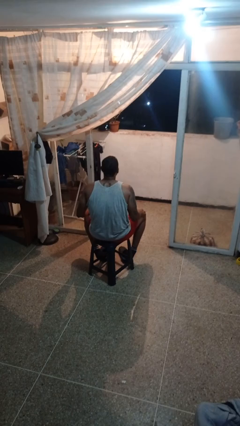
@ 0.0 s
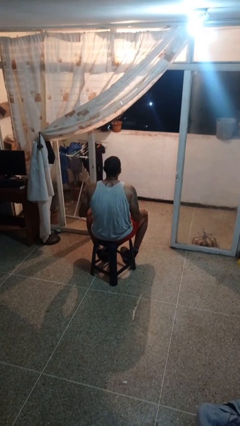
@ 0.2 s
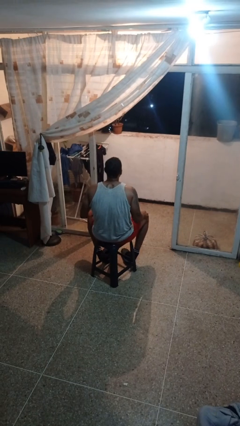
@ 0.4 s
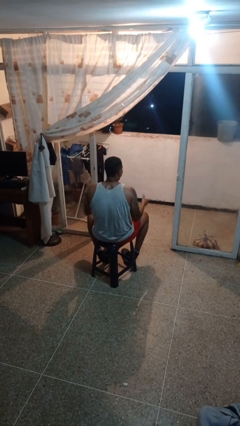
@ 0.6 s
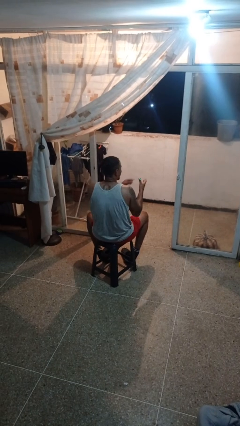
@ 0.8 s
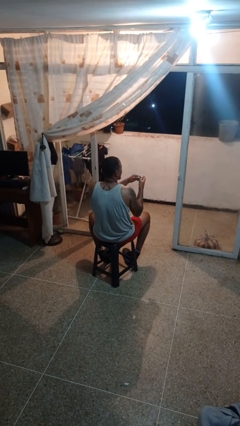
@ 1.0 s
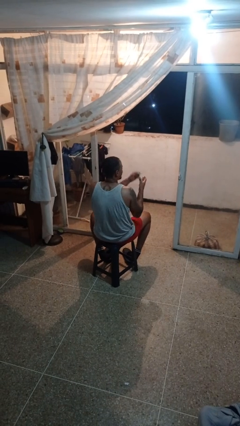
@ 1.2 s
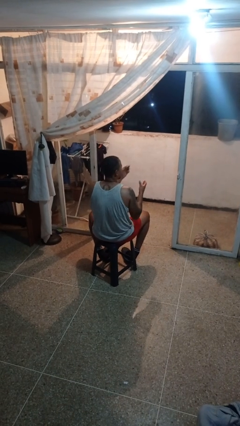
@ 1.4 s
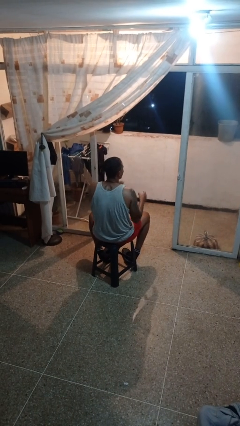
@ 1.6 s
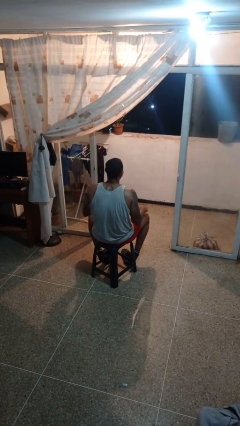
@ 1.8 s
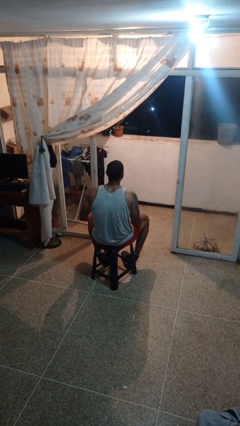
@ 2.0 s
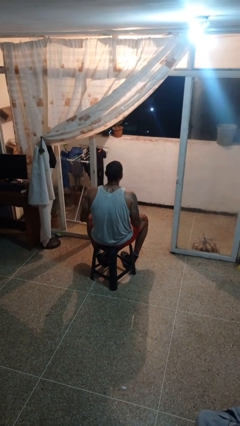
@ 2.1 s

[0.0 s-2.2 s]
person takes off ring

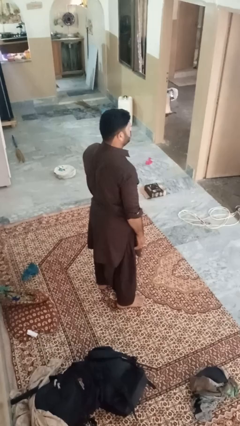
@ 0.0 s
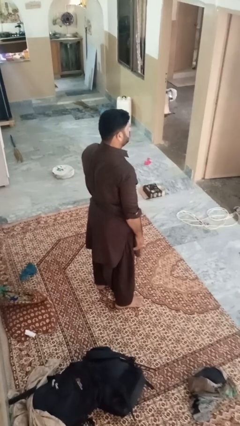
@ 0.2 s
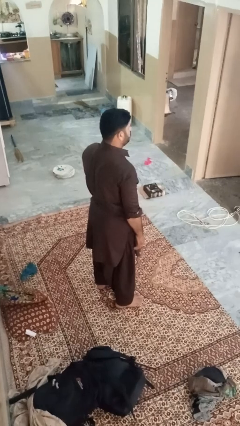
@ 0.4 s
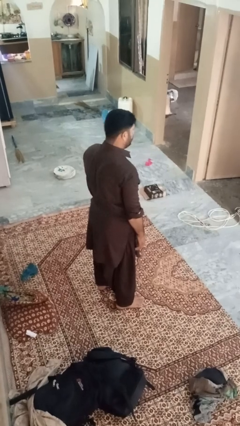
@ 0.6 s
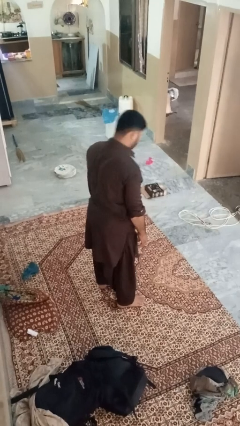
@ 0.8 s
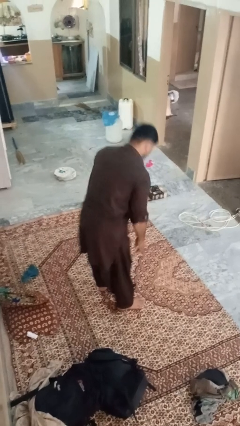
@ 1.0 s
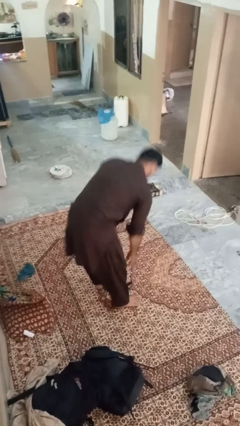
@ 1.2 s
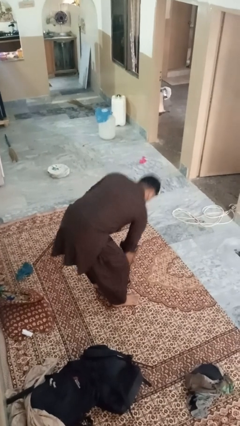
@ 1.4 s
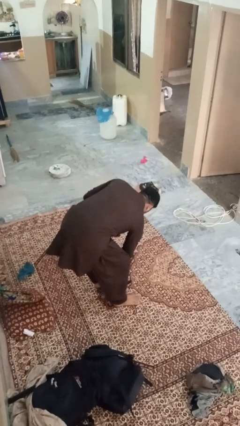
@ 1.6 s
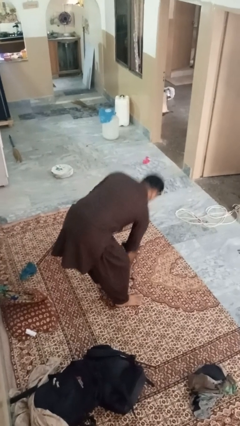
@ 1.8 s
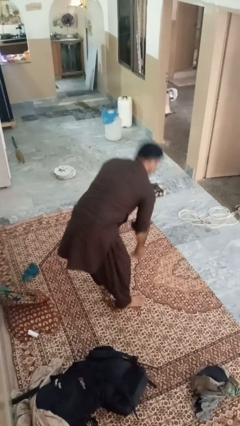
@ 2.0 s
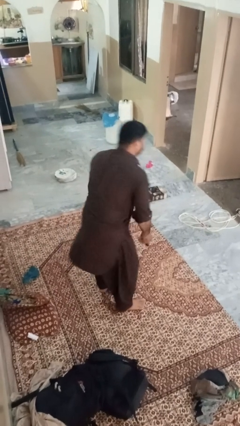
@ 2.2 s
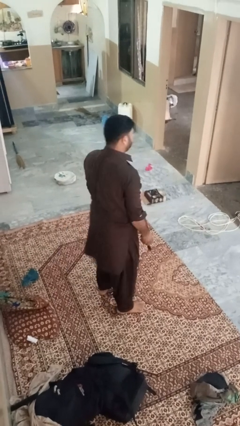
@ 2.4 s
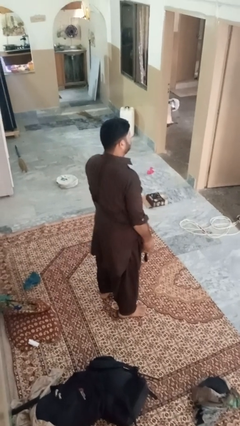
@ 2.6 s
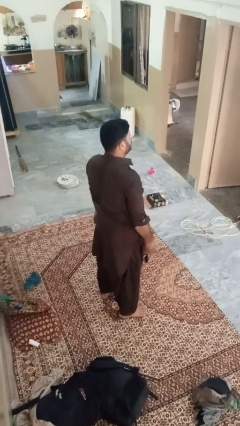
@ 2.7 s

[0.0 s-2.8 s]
person picks up object from floor

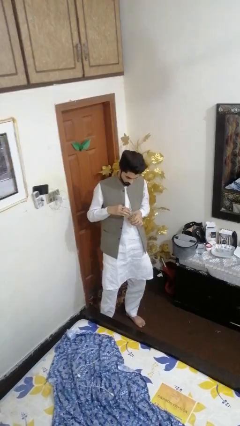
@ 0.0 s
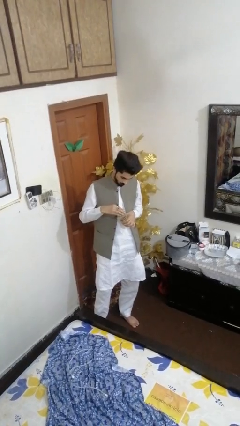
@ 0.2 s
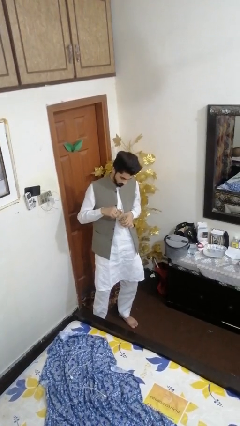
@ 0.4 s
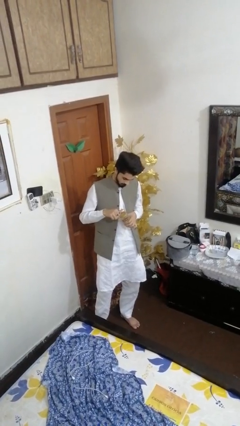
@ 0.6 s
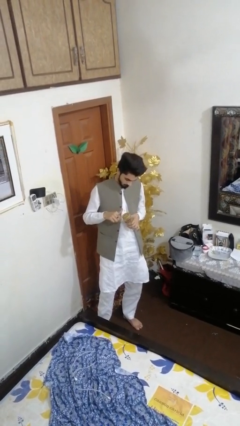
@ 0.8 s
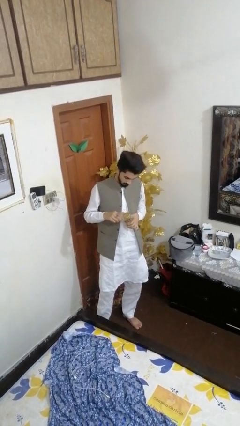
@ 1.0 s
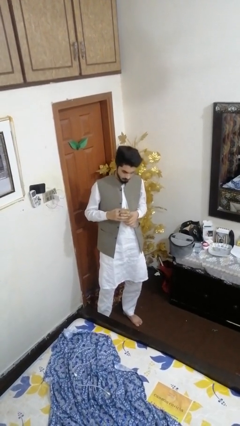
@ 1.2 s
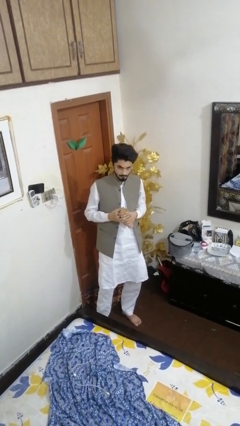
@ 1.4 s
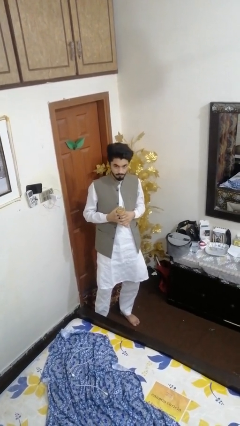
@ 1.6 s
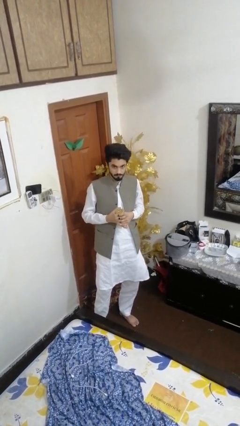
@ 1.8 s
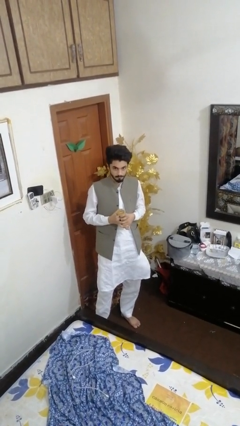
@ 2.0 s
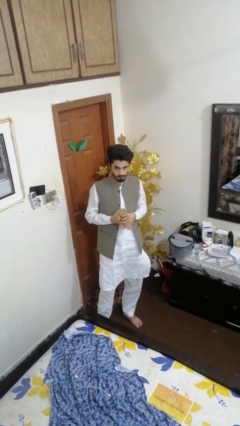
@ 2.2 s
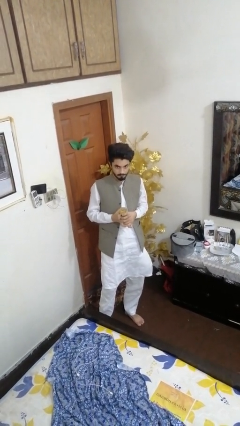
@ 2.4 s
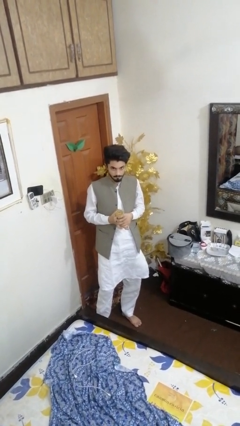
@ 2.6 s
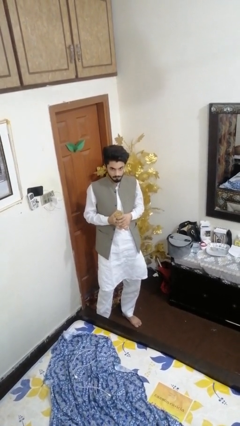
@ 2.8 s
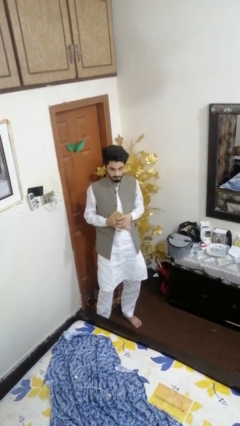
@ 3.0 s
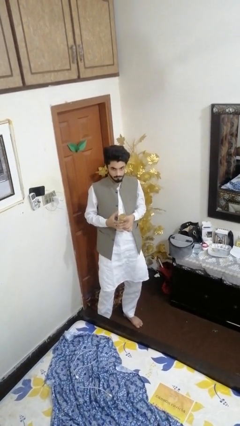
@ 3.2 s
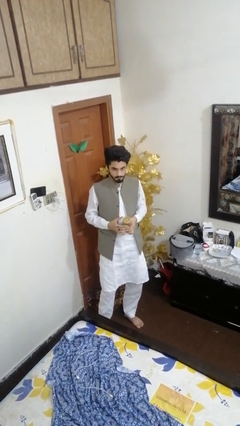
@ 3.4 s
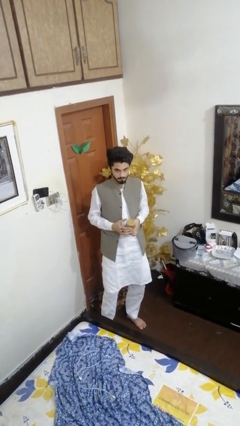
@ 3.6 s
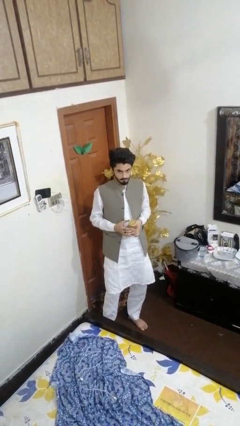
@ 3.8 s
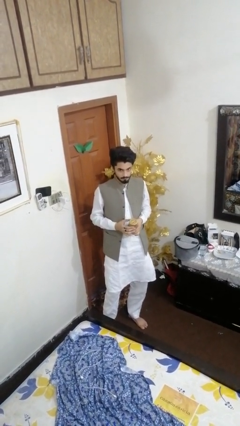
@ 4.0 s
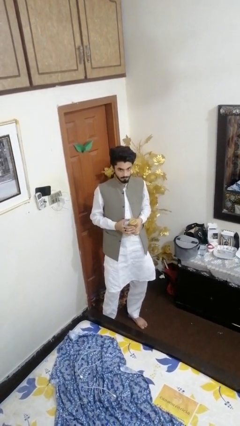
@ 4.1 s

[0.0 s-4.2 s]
person closes jar

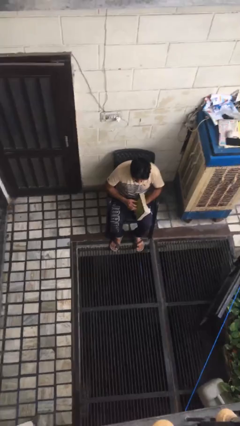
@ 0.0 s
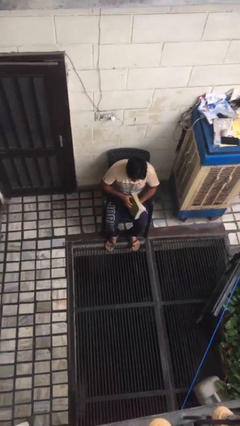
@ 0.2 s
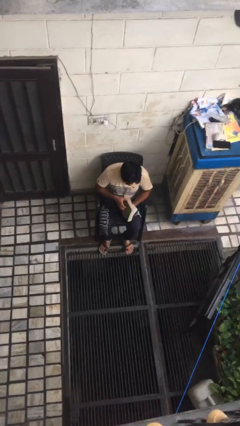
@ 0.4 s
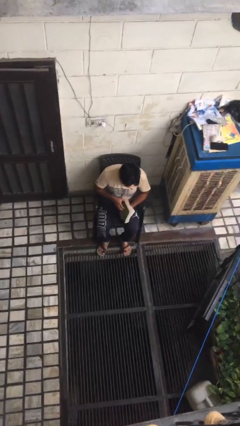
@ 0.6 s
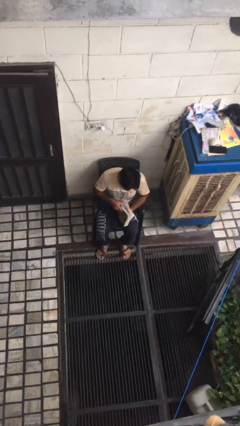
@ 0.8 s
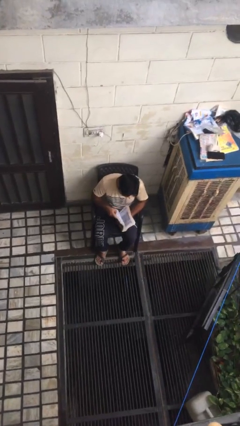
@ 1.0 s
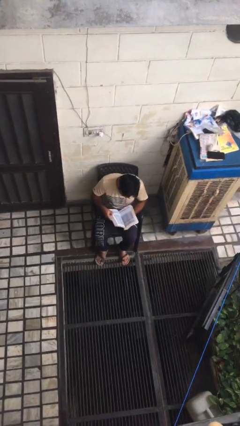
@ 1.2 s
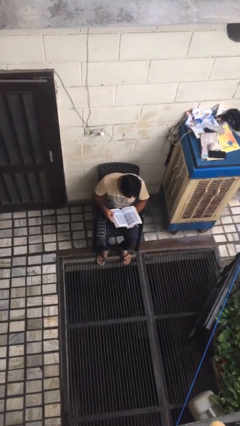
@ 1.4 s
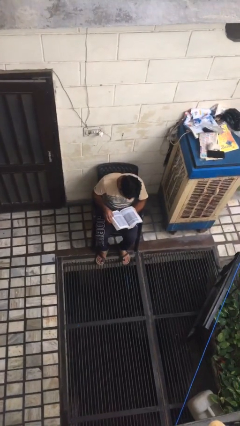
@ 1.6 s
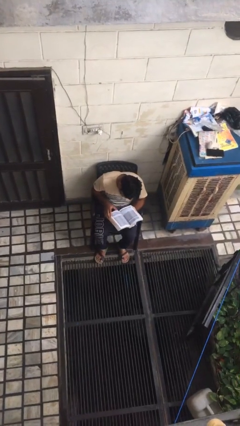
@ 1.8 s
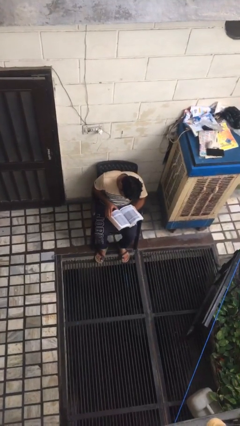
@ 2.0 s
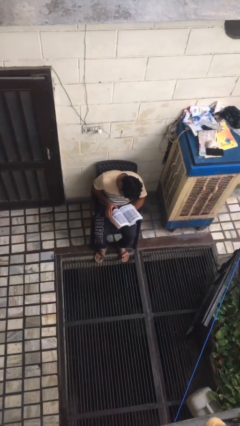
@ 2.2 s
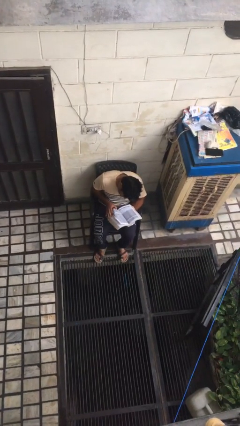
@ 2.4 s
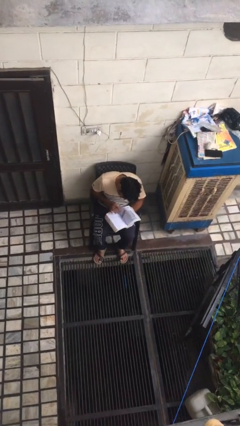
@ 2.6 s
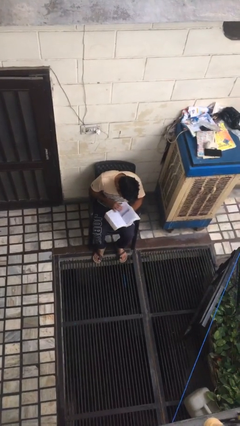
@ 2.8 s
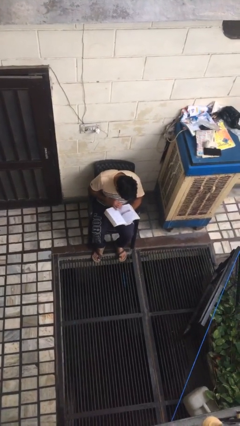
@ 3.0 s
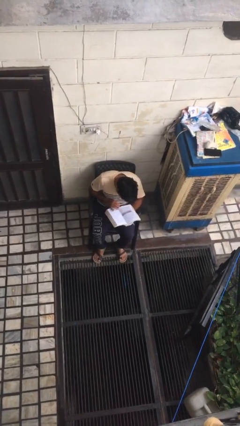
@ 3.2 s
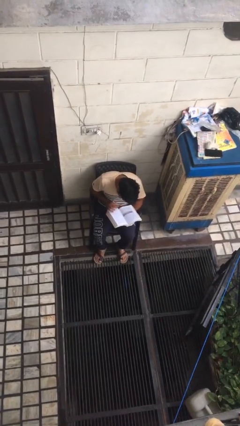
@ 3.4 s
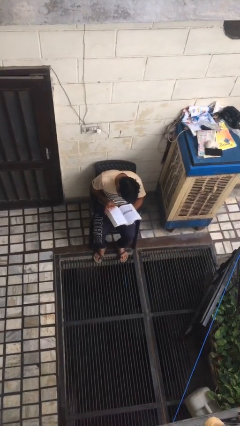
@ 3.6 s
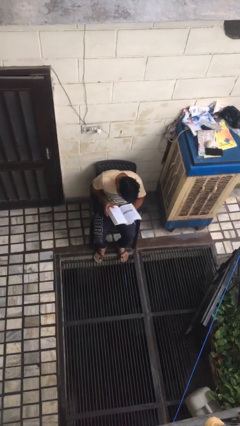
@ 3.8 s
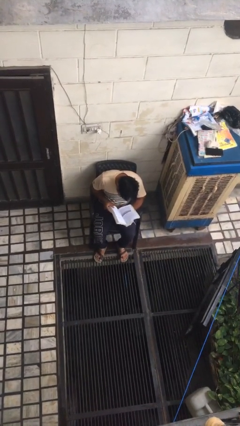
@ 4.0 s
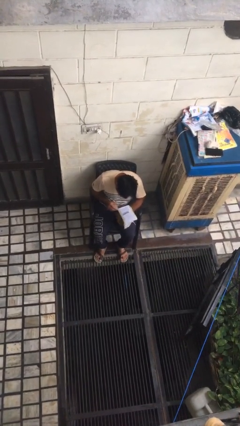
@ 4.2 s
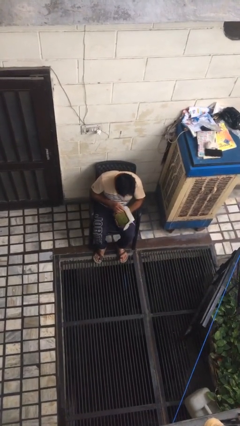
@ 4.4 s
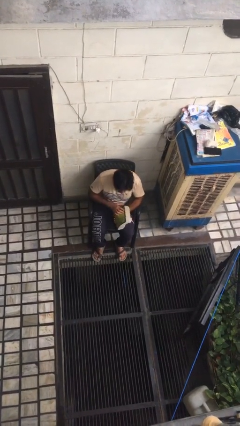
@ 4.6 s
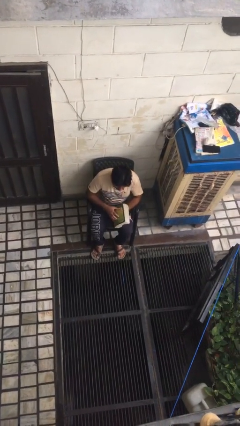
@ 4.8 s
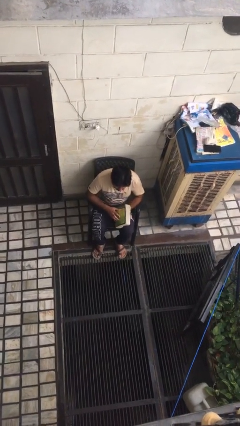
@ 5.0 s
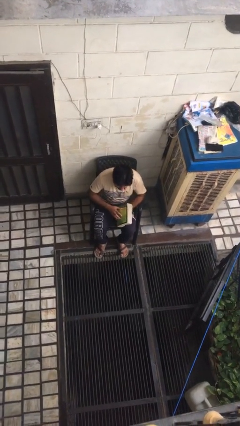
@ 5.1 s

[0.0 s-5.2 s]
person reads book

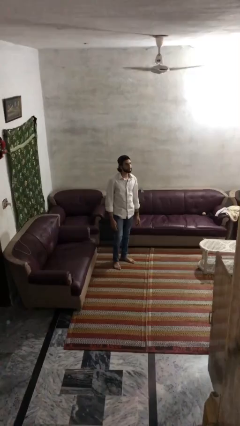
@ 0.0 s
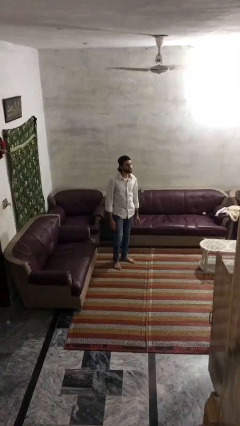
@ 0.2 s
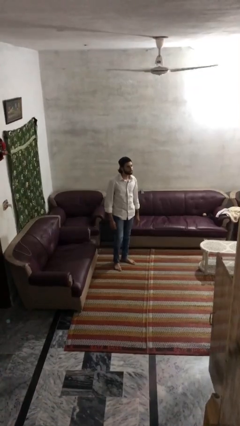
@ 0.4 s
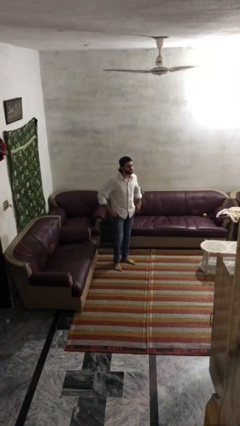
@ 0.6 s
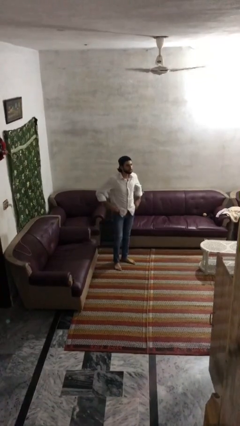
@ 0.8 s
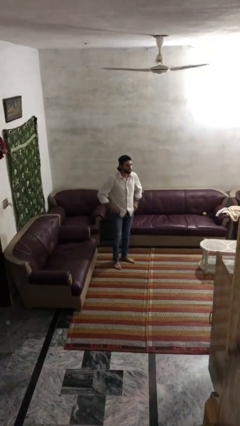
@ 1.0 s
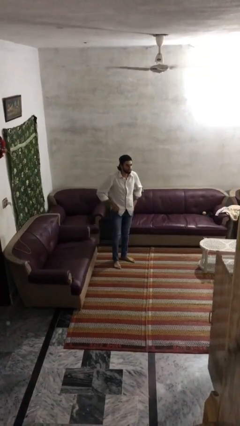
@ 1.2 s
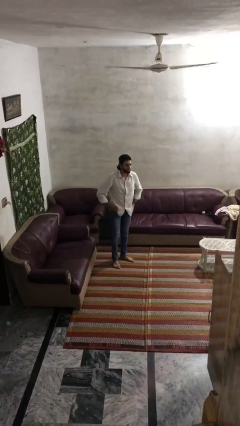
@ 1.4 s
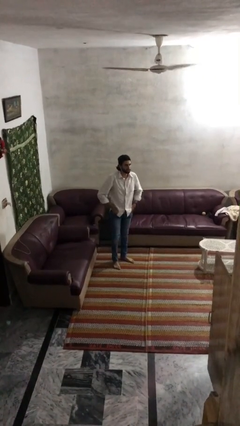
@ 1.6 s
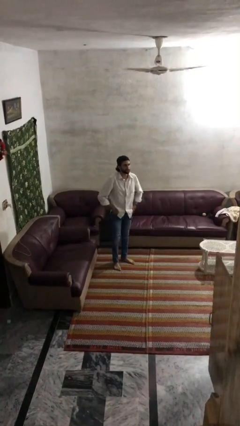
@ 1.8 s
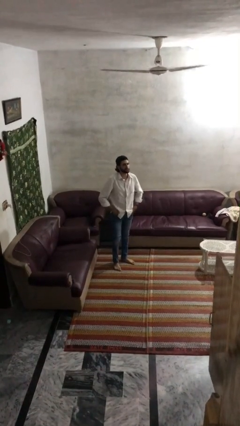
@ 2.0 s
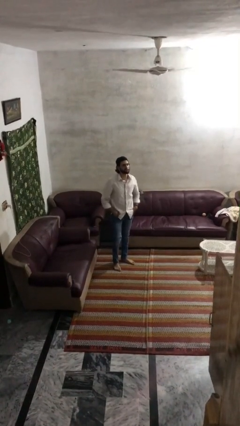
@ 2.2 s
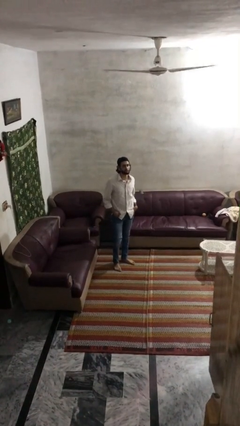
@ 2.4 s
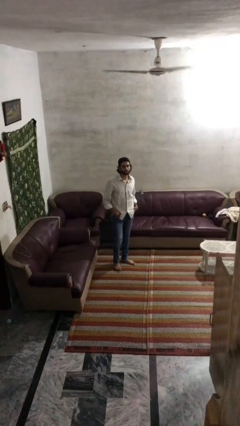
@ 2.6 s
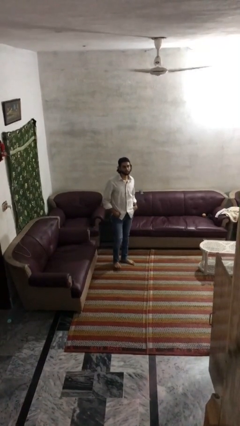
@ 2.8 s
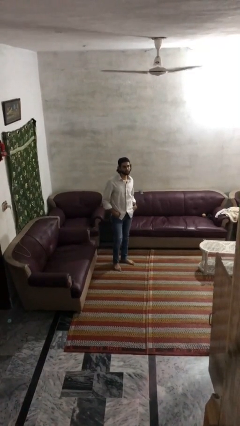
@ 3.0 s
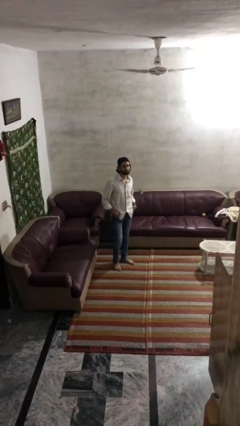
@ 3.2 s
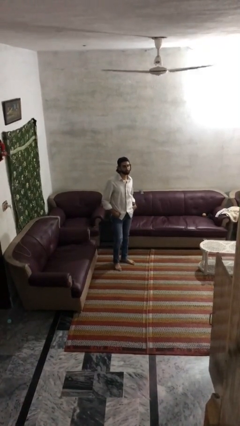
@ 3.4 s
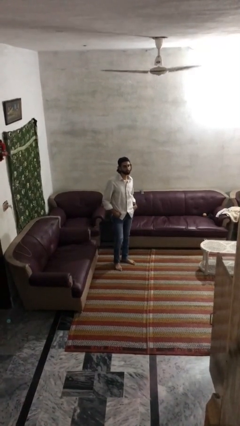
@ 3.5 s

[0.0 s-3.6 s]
person puts hands in back pockets
